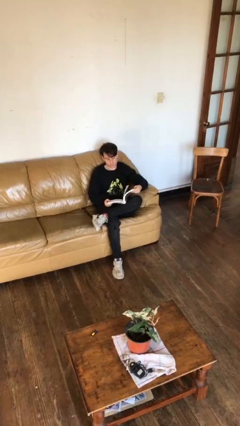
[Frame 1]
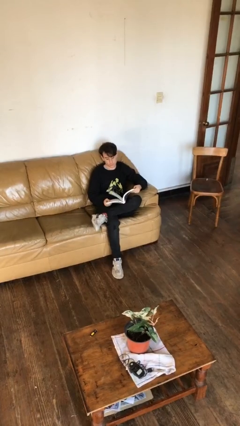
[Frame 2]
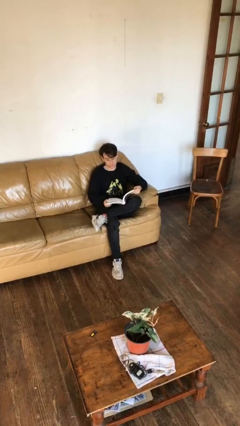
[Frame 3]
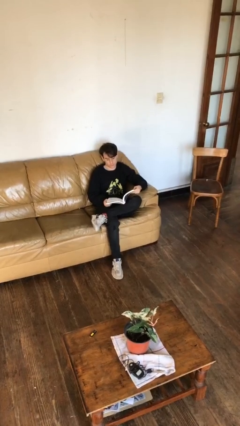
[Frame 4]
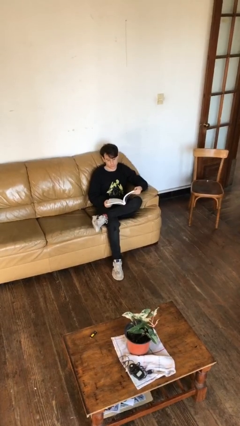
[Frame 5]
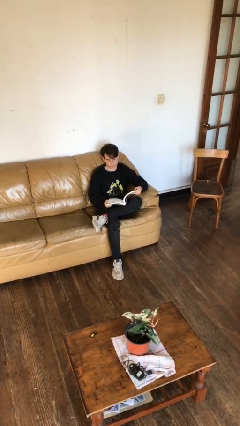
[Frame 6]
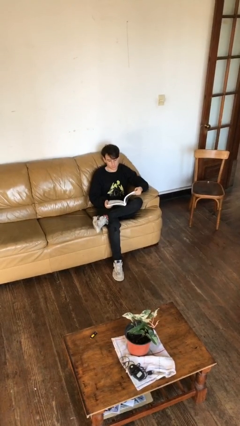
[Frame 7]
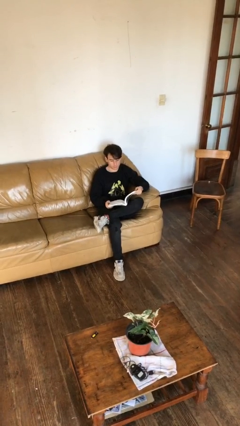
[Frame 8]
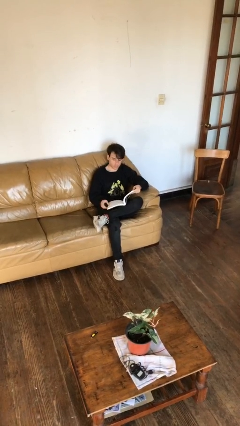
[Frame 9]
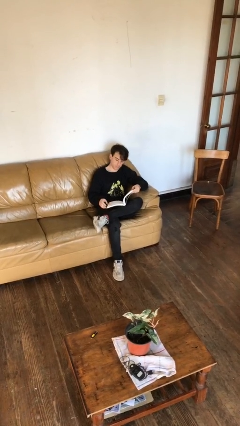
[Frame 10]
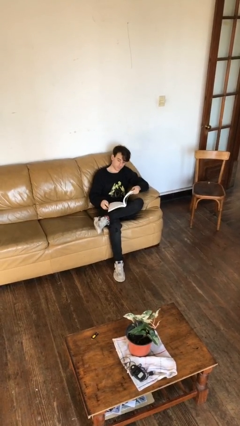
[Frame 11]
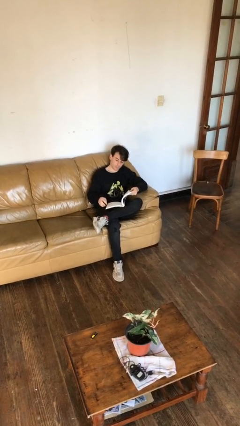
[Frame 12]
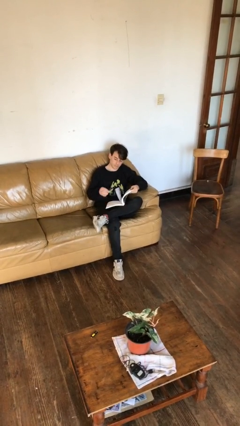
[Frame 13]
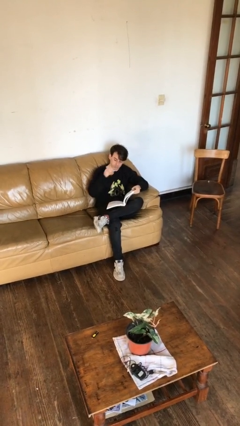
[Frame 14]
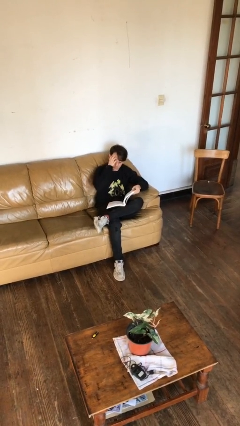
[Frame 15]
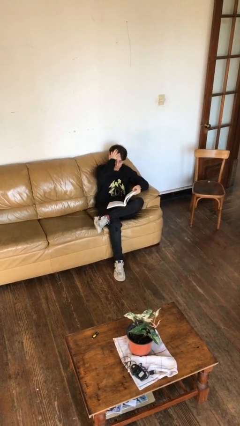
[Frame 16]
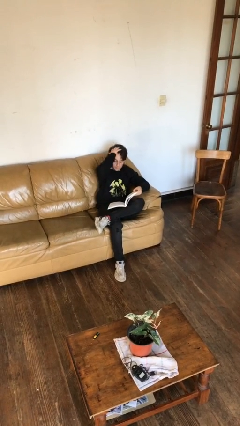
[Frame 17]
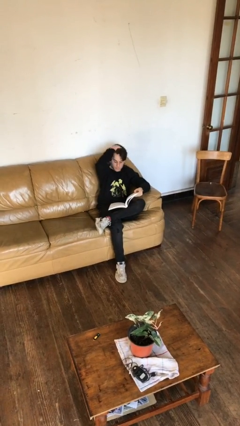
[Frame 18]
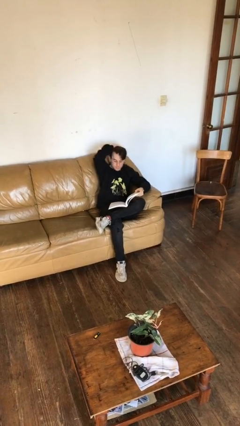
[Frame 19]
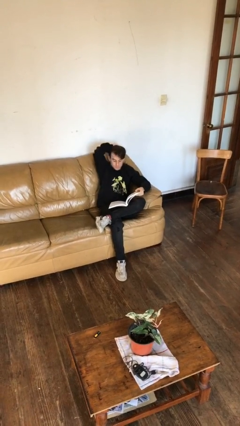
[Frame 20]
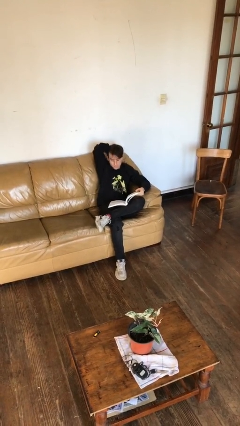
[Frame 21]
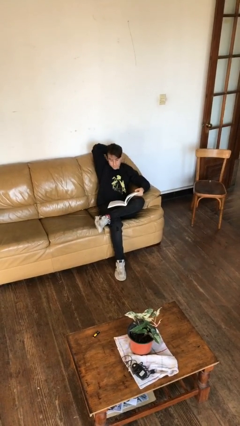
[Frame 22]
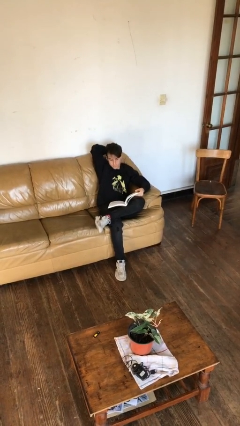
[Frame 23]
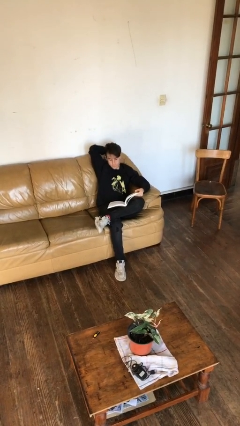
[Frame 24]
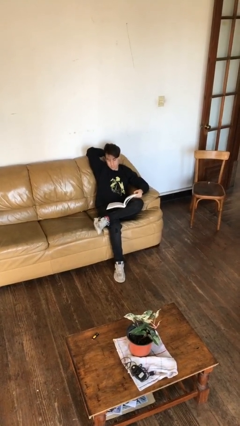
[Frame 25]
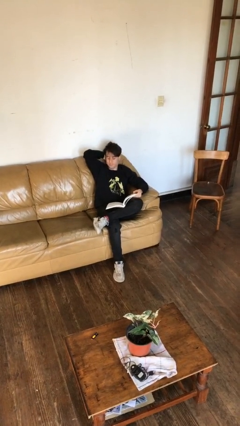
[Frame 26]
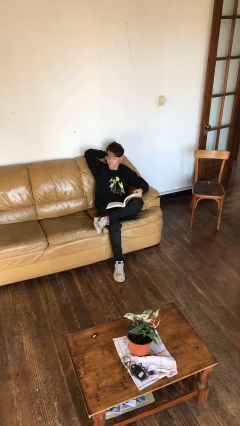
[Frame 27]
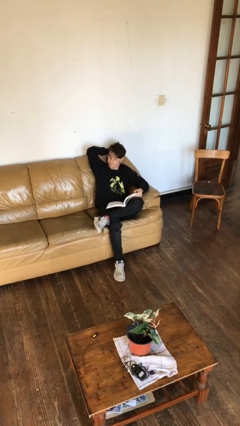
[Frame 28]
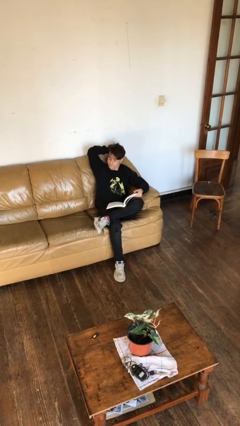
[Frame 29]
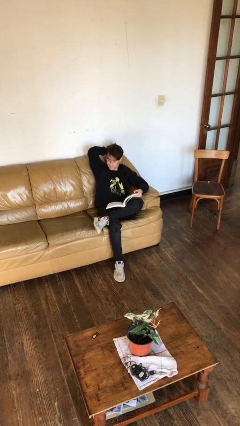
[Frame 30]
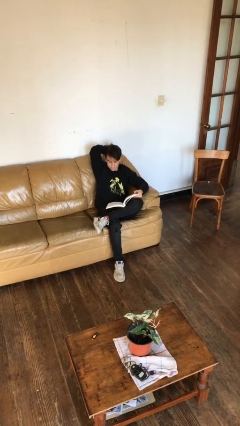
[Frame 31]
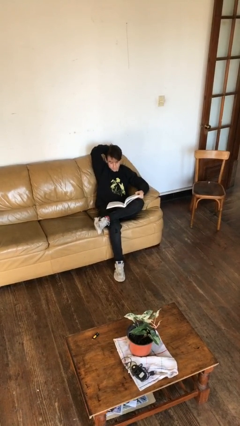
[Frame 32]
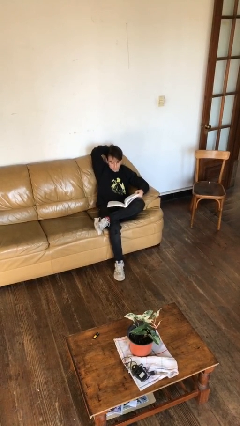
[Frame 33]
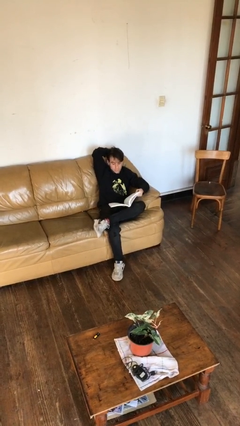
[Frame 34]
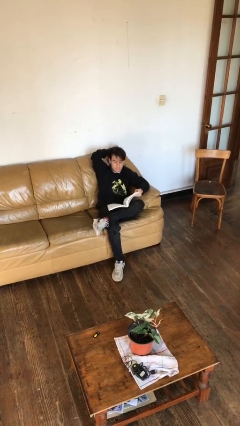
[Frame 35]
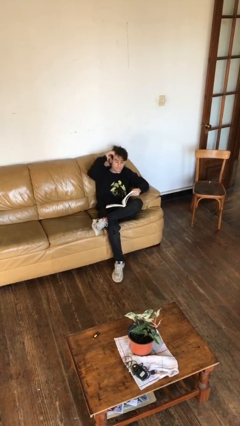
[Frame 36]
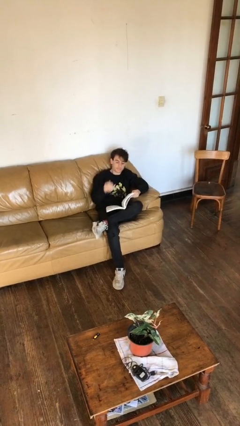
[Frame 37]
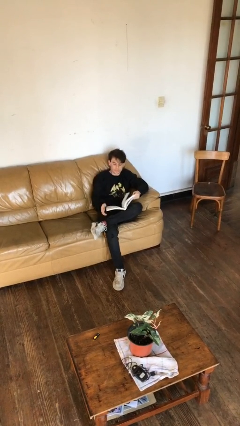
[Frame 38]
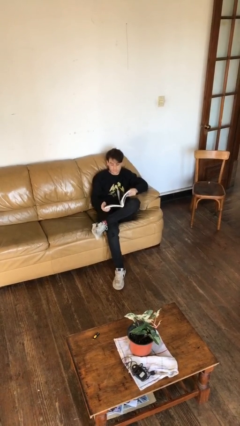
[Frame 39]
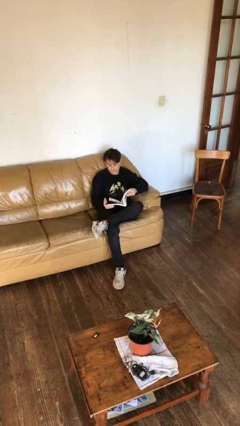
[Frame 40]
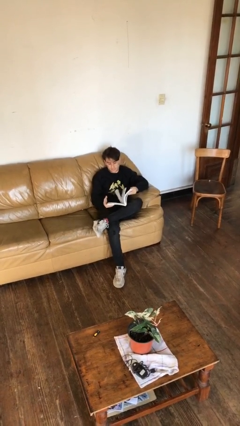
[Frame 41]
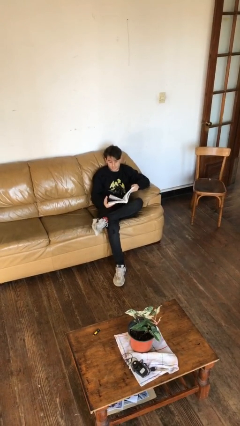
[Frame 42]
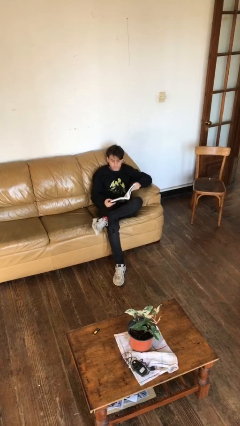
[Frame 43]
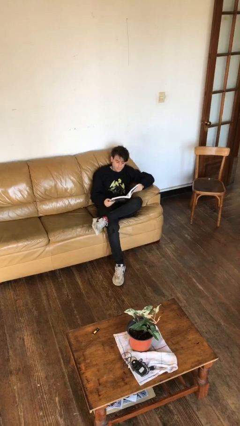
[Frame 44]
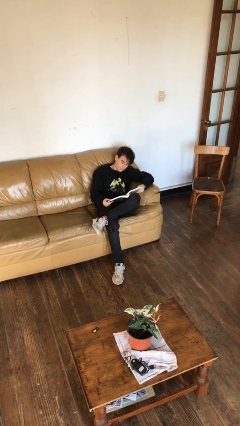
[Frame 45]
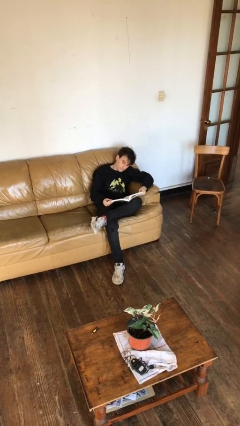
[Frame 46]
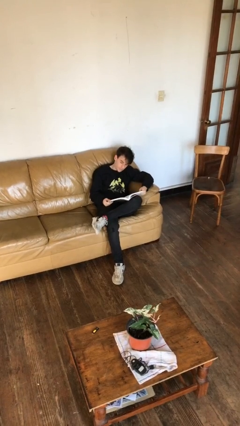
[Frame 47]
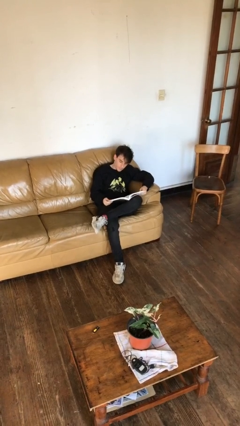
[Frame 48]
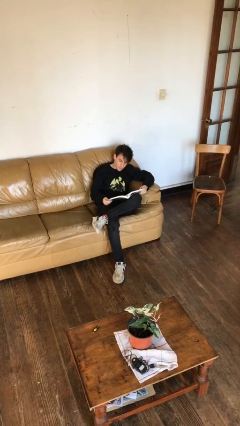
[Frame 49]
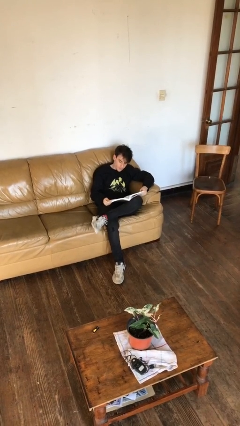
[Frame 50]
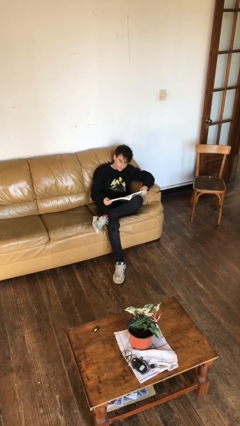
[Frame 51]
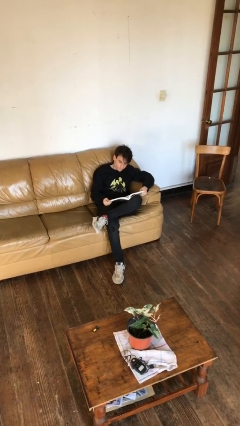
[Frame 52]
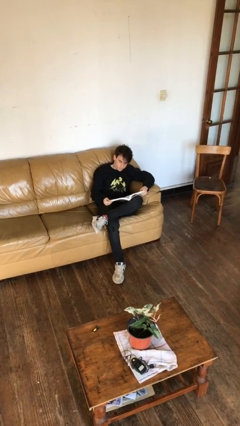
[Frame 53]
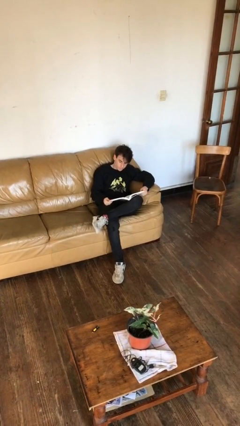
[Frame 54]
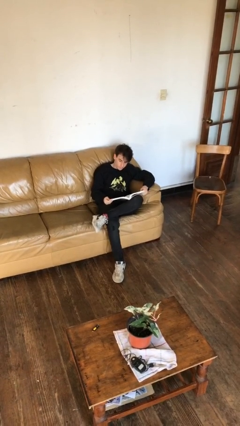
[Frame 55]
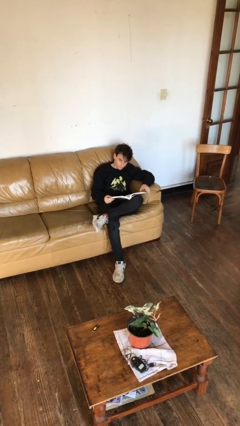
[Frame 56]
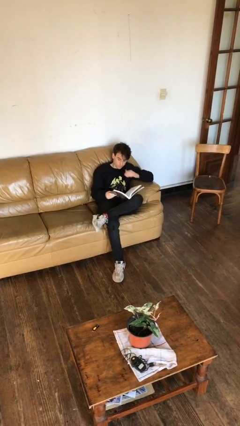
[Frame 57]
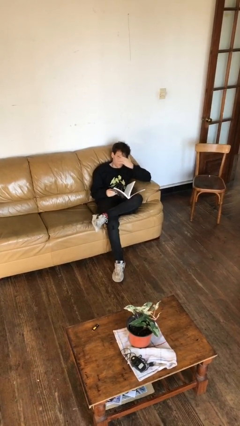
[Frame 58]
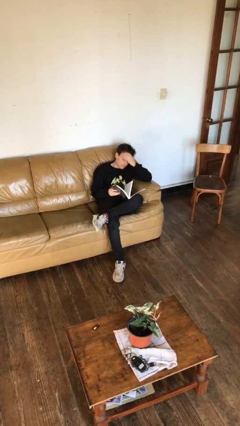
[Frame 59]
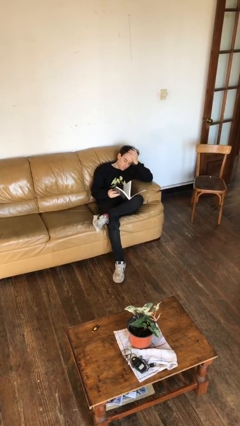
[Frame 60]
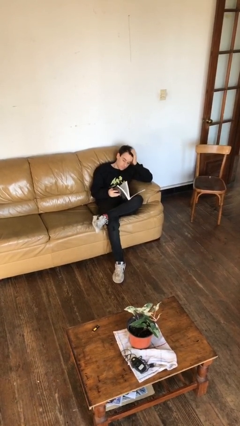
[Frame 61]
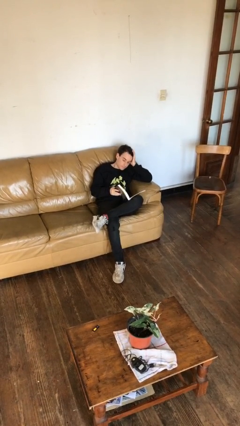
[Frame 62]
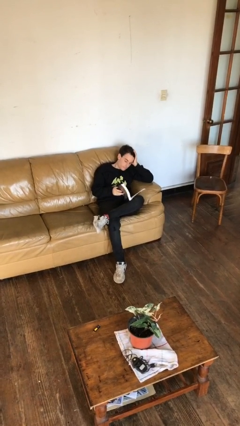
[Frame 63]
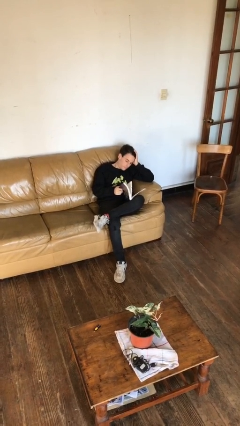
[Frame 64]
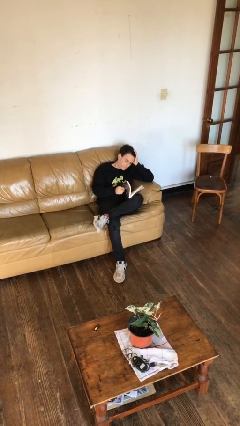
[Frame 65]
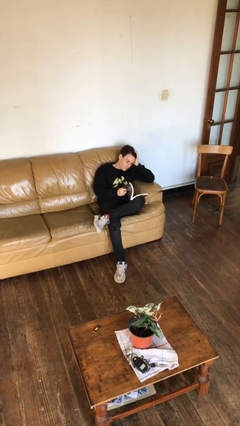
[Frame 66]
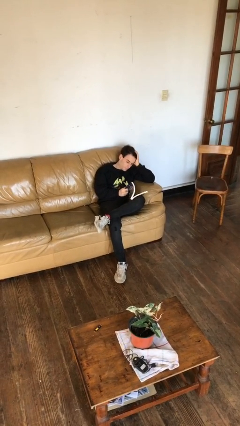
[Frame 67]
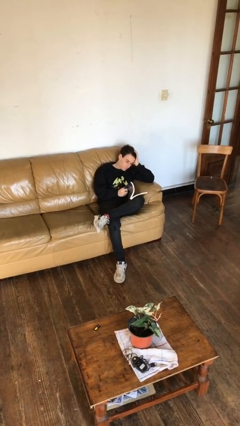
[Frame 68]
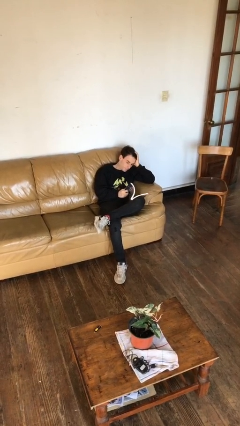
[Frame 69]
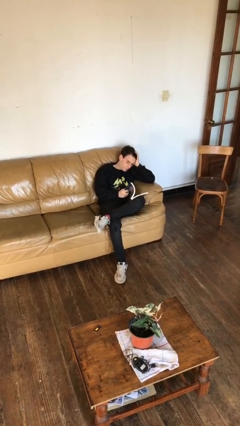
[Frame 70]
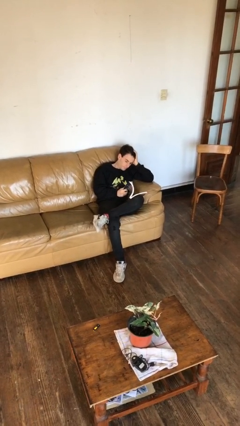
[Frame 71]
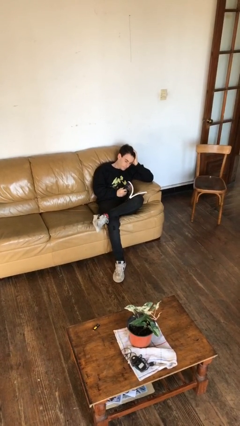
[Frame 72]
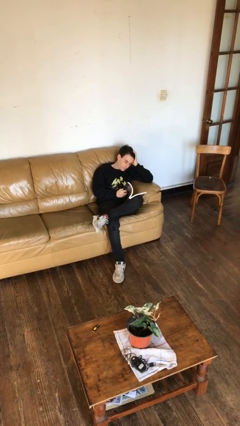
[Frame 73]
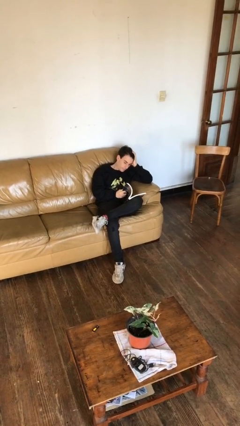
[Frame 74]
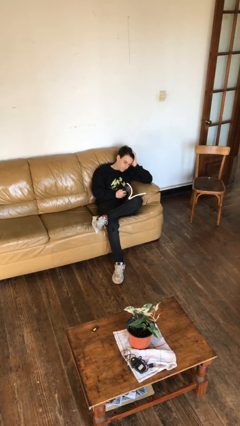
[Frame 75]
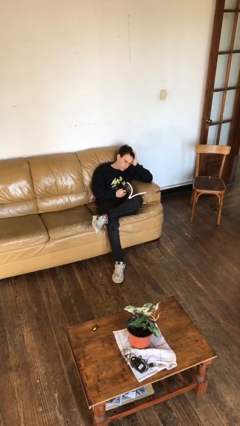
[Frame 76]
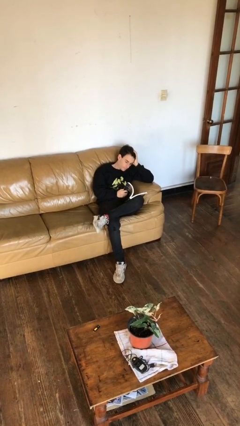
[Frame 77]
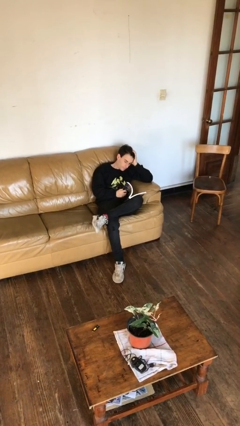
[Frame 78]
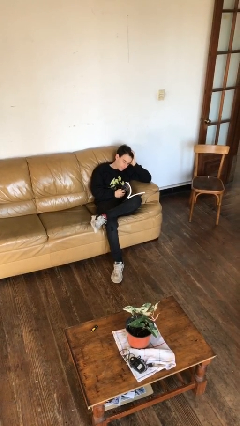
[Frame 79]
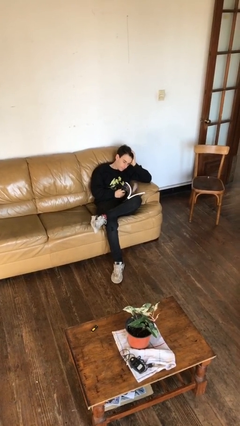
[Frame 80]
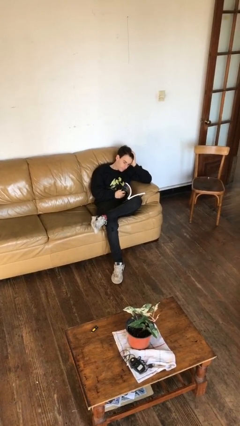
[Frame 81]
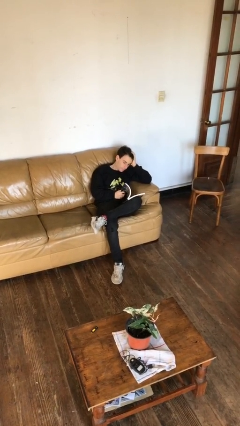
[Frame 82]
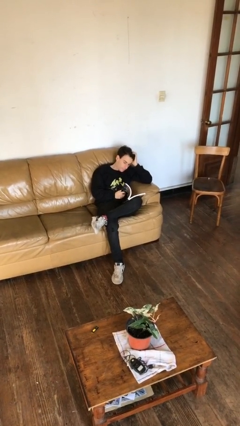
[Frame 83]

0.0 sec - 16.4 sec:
person reads document

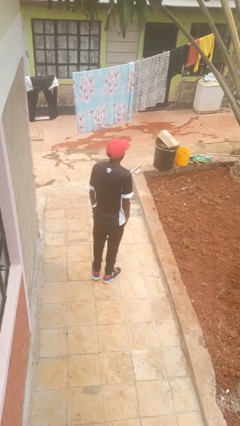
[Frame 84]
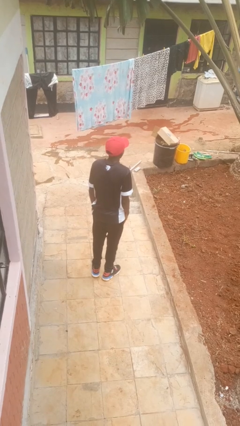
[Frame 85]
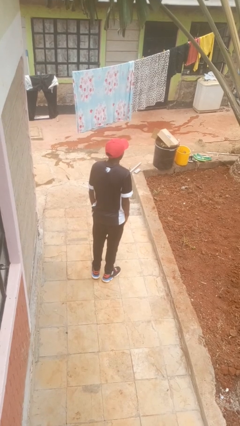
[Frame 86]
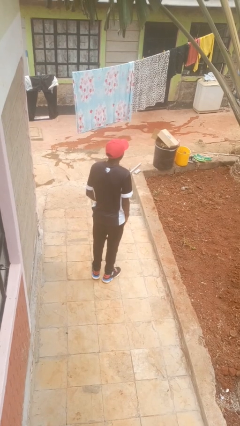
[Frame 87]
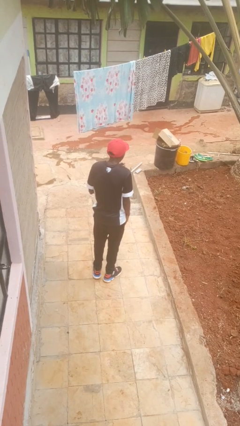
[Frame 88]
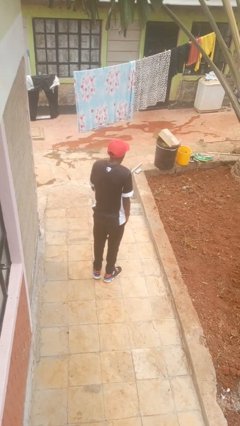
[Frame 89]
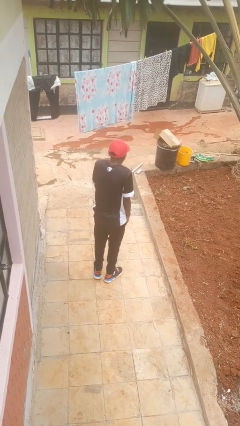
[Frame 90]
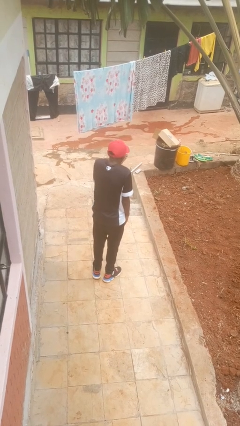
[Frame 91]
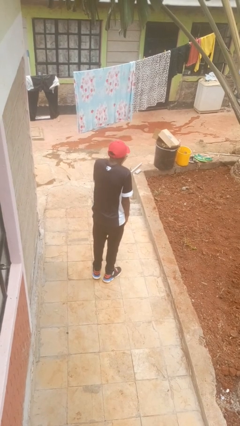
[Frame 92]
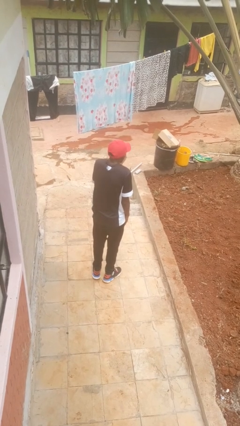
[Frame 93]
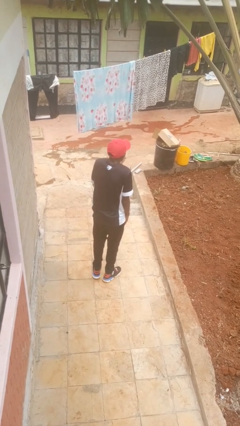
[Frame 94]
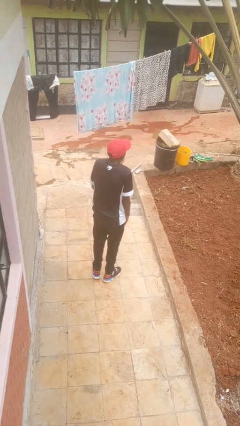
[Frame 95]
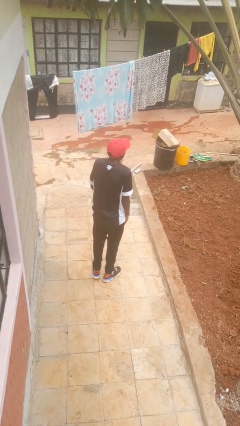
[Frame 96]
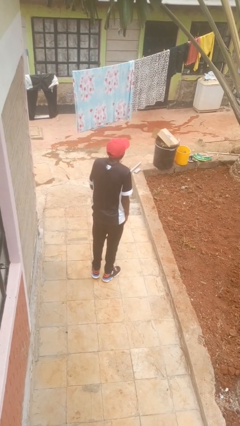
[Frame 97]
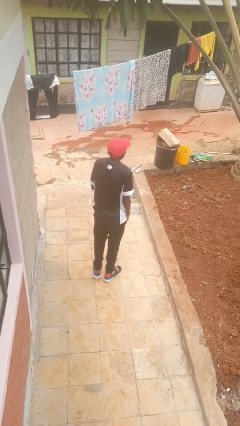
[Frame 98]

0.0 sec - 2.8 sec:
person gestures blow kiss
